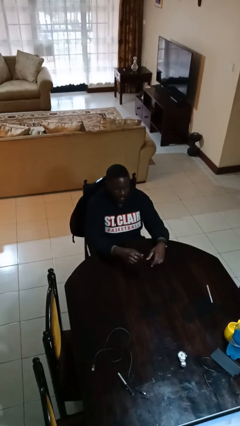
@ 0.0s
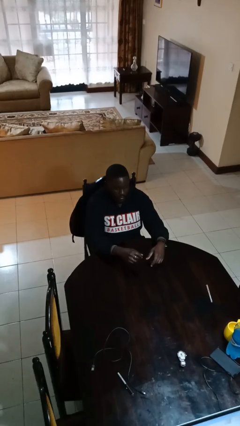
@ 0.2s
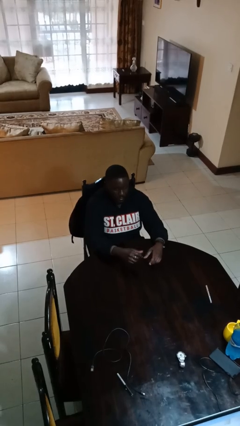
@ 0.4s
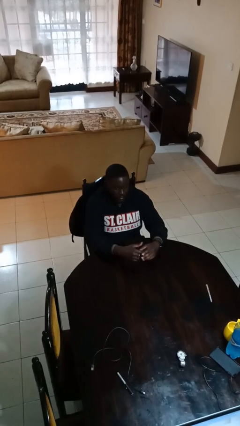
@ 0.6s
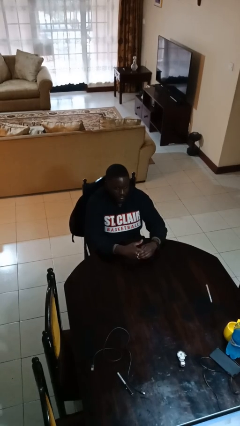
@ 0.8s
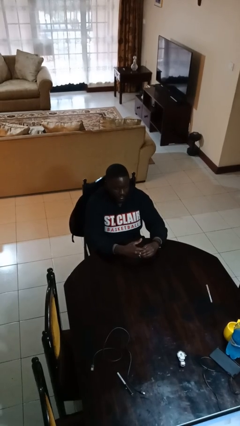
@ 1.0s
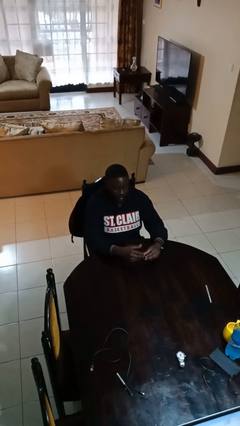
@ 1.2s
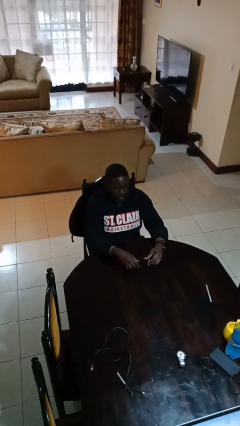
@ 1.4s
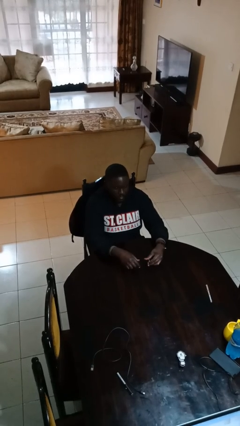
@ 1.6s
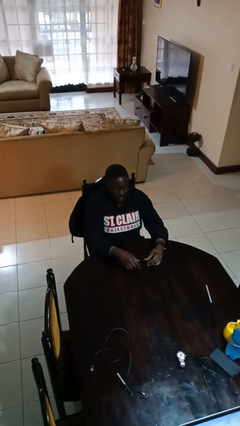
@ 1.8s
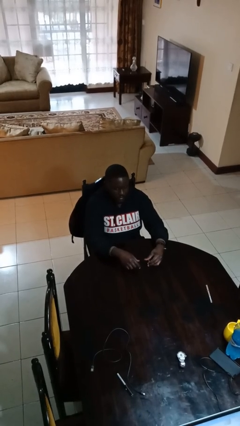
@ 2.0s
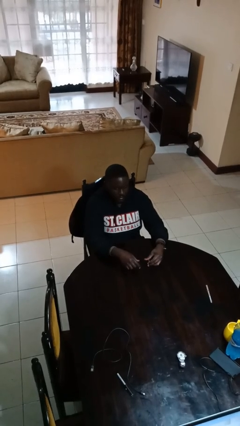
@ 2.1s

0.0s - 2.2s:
person takes off ring

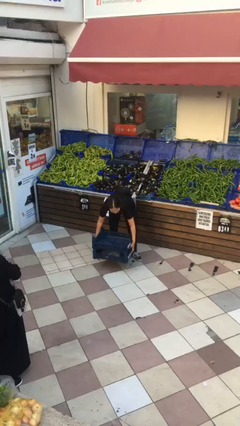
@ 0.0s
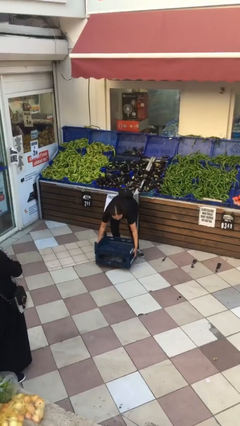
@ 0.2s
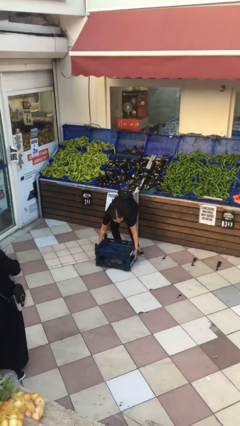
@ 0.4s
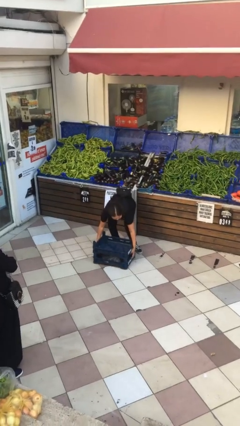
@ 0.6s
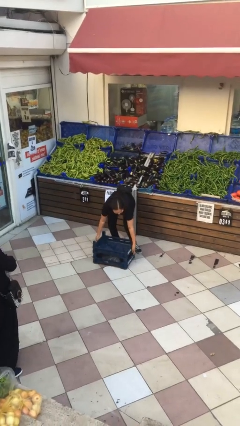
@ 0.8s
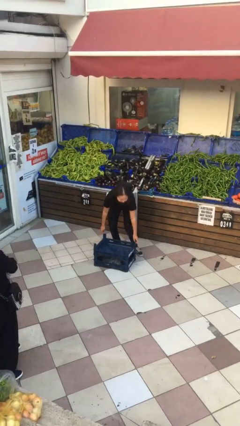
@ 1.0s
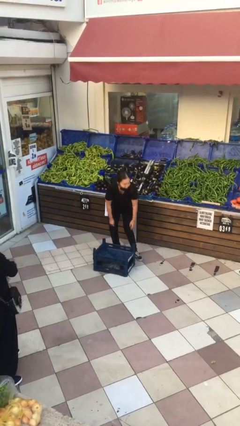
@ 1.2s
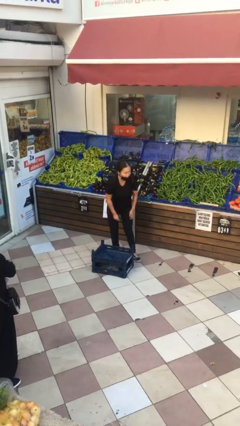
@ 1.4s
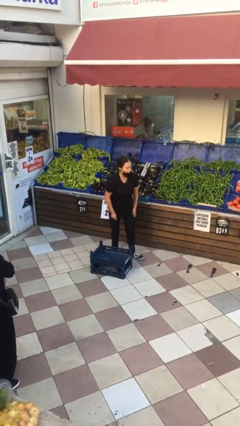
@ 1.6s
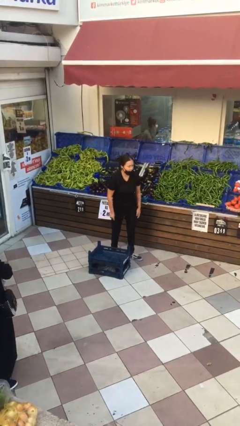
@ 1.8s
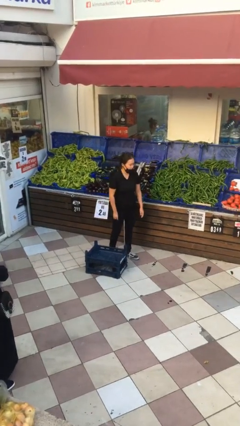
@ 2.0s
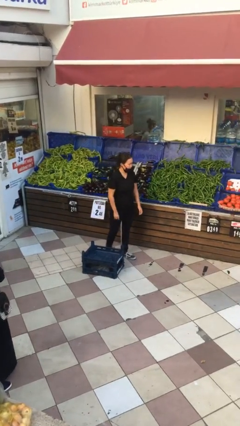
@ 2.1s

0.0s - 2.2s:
person puts down object on floor

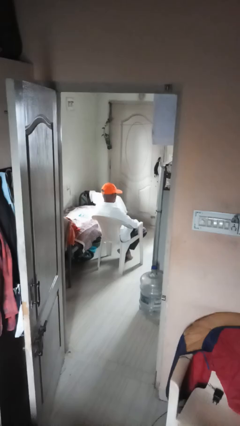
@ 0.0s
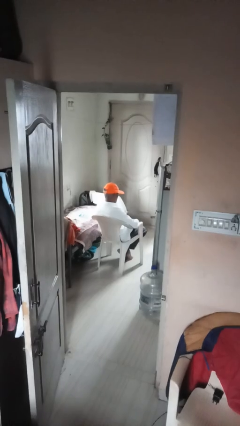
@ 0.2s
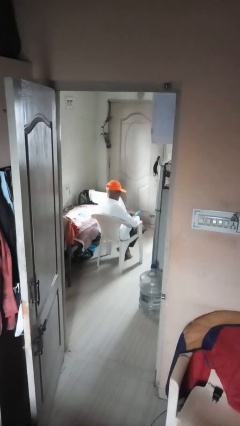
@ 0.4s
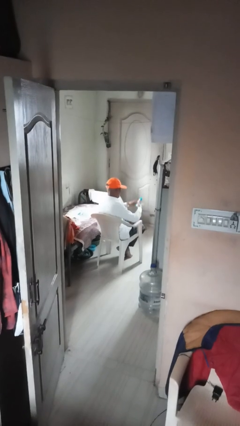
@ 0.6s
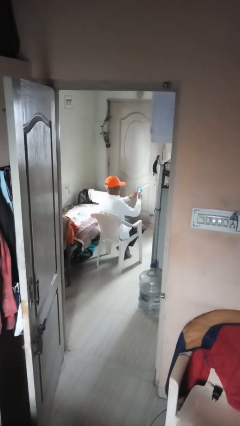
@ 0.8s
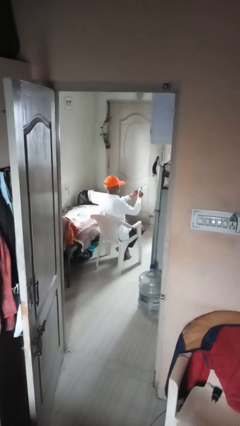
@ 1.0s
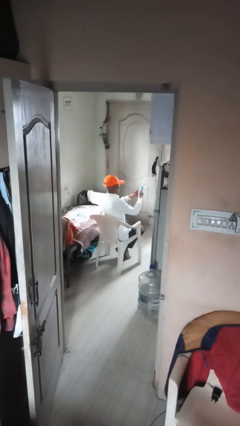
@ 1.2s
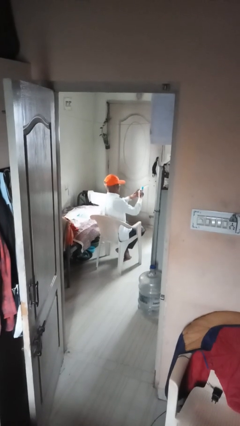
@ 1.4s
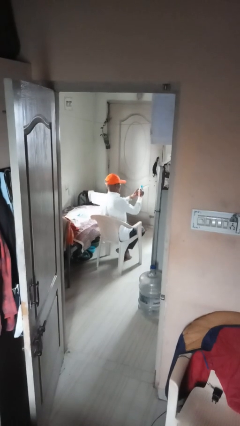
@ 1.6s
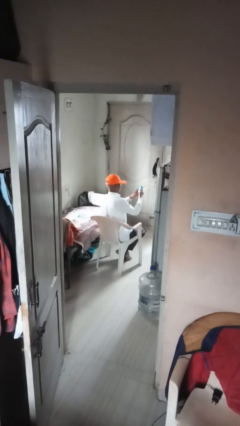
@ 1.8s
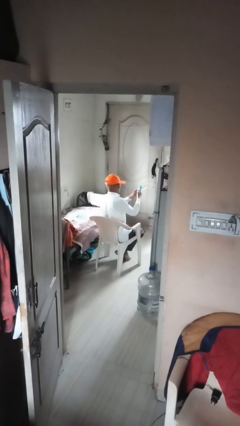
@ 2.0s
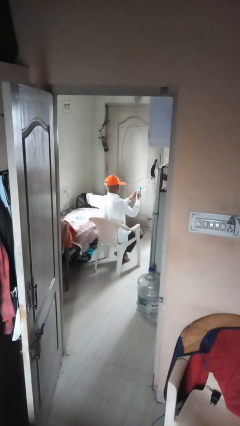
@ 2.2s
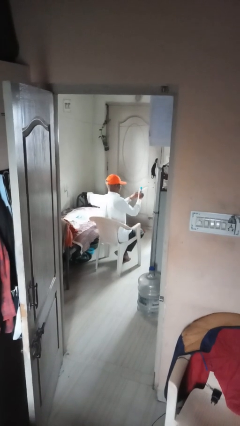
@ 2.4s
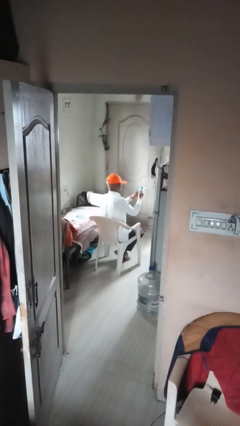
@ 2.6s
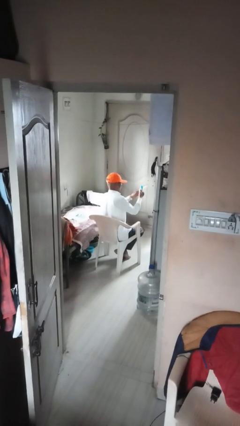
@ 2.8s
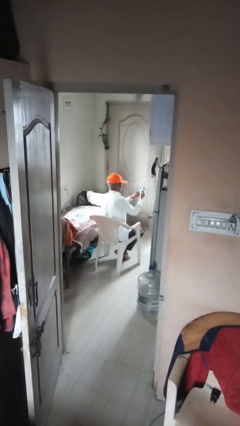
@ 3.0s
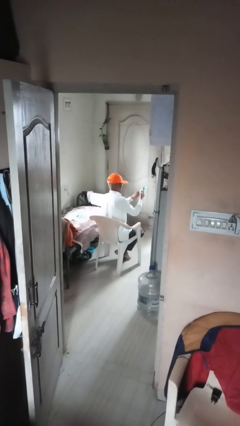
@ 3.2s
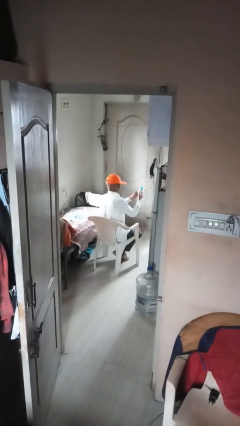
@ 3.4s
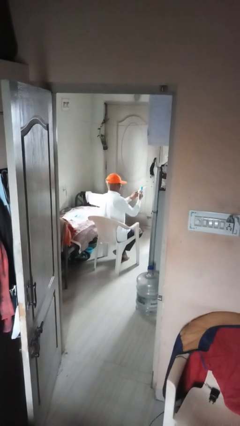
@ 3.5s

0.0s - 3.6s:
person squeezes object

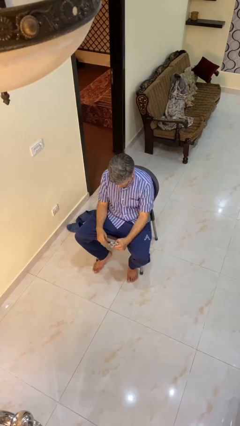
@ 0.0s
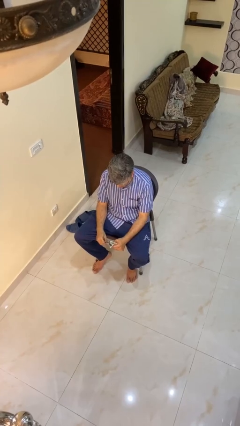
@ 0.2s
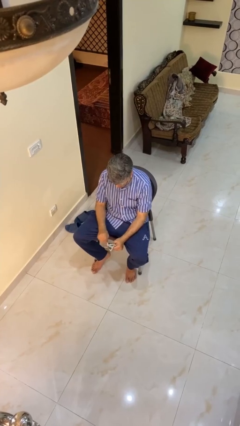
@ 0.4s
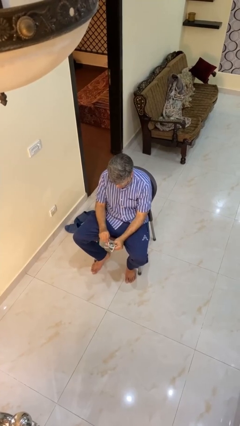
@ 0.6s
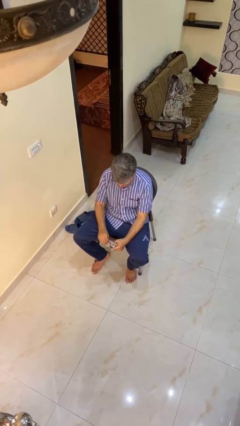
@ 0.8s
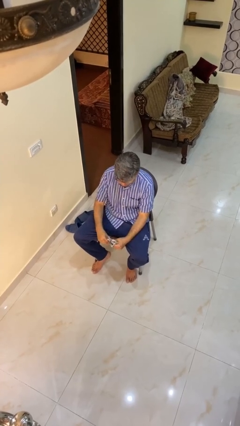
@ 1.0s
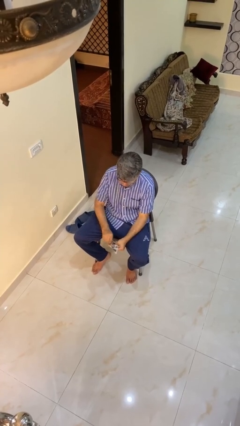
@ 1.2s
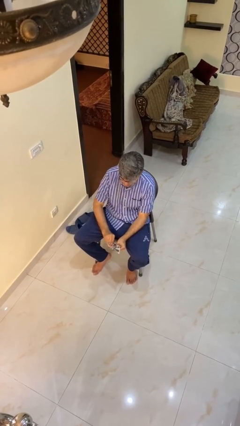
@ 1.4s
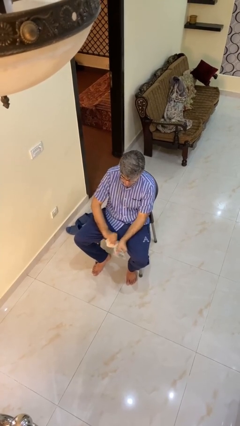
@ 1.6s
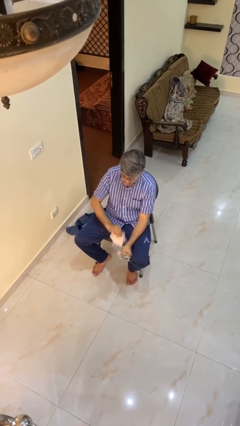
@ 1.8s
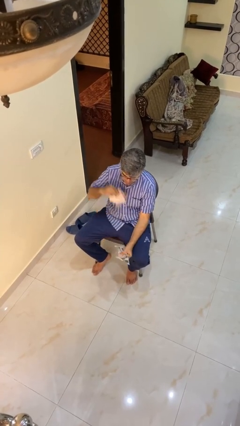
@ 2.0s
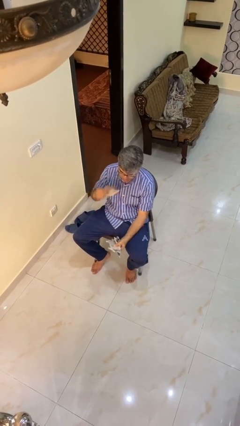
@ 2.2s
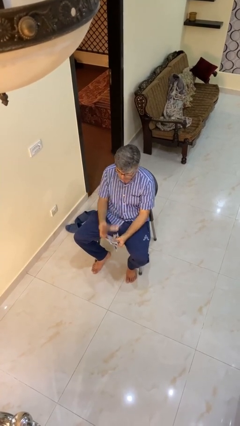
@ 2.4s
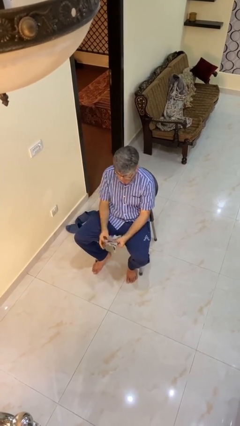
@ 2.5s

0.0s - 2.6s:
person tears paper

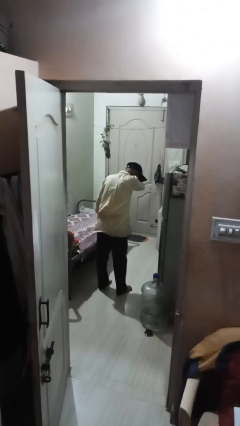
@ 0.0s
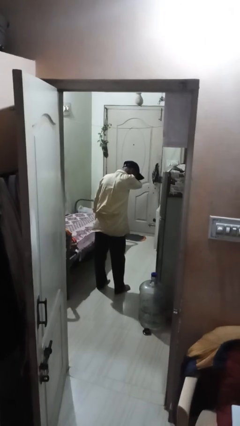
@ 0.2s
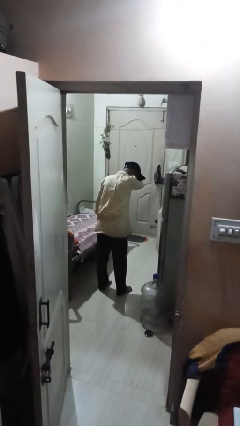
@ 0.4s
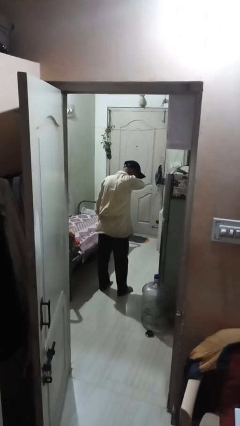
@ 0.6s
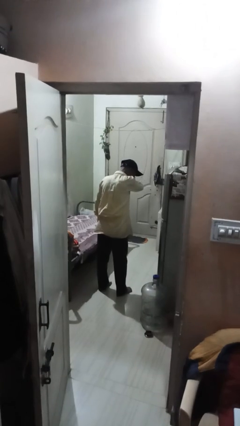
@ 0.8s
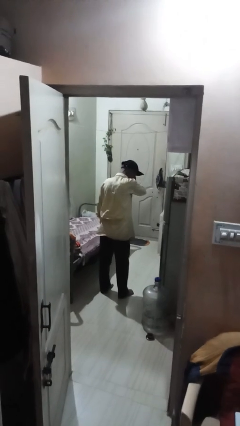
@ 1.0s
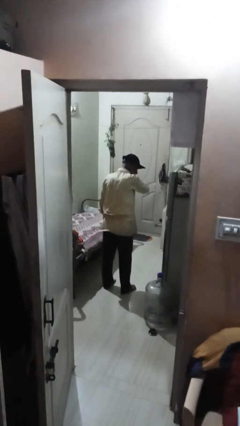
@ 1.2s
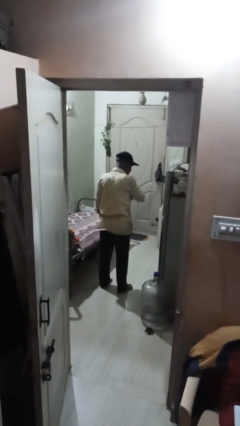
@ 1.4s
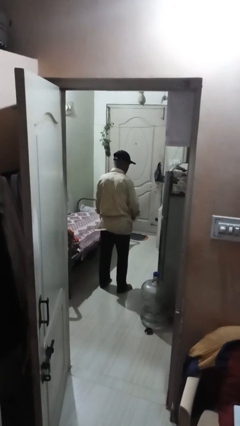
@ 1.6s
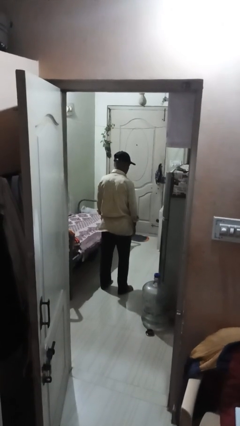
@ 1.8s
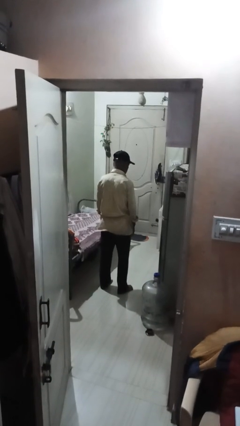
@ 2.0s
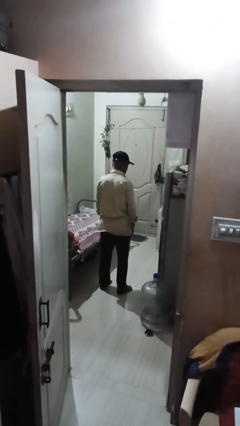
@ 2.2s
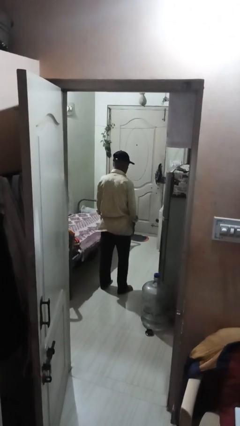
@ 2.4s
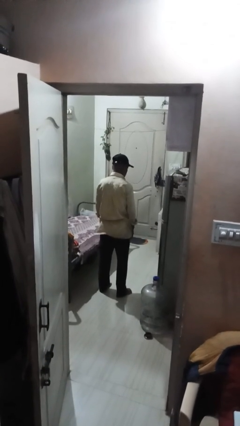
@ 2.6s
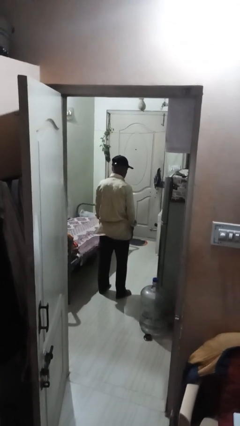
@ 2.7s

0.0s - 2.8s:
person shrugs

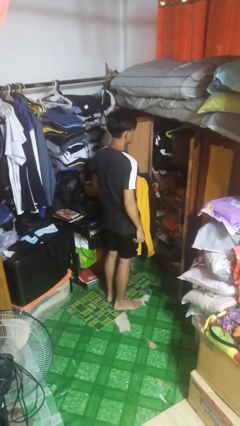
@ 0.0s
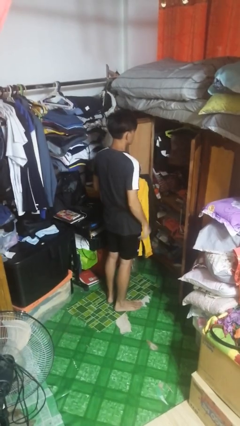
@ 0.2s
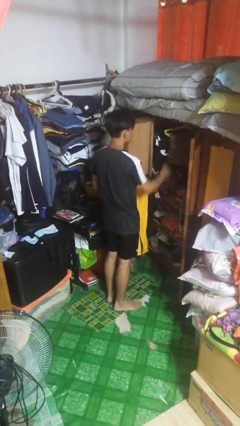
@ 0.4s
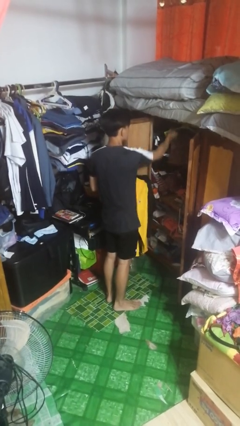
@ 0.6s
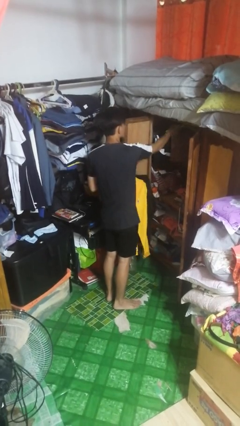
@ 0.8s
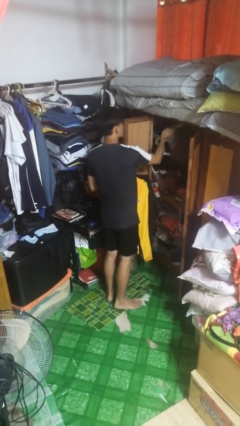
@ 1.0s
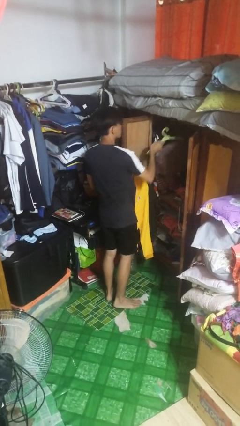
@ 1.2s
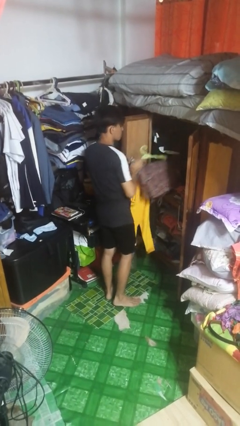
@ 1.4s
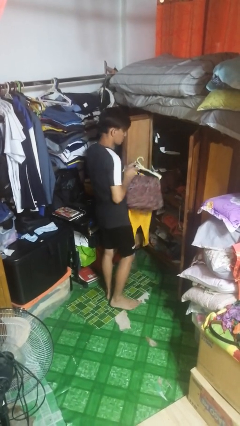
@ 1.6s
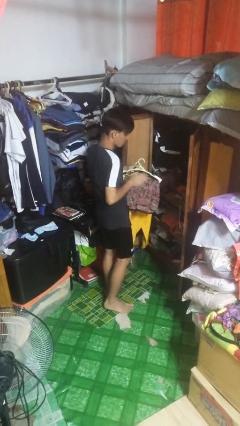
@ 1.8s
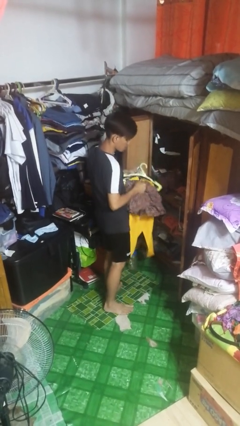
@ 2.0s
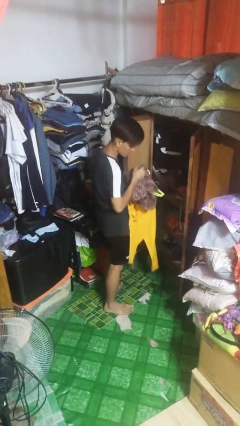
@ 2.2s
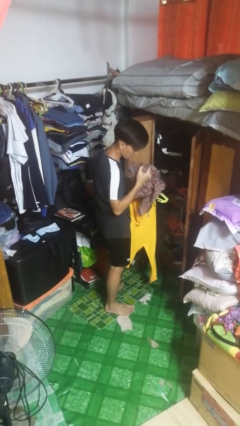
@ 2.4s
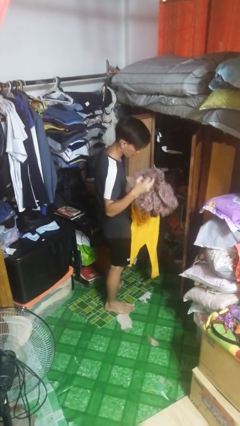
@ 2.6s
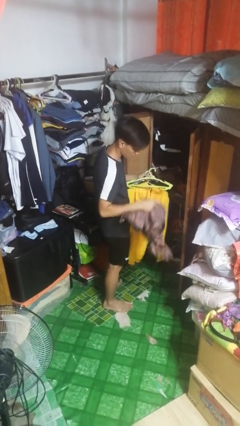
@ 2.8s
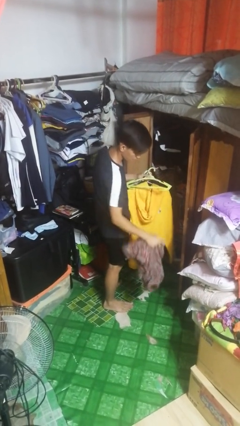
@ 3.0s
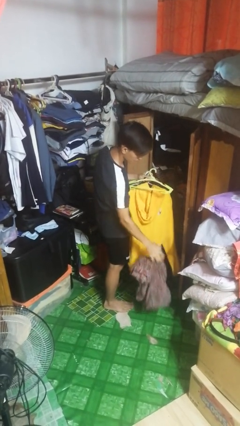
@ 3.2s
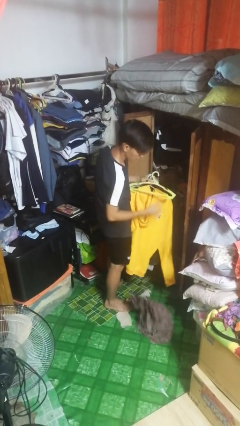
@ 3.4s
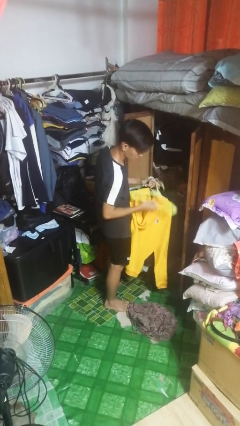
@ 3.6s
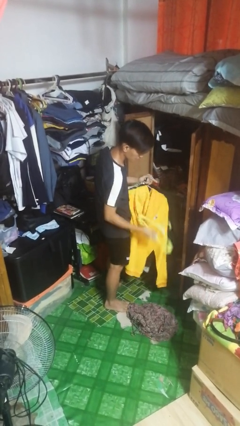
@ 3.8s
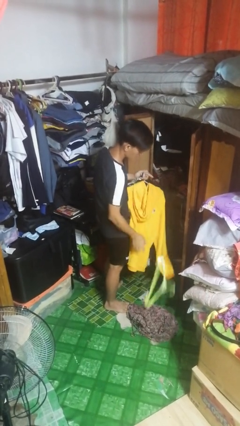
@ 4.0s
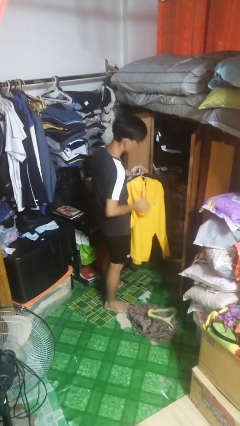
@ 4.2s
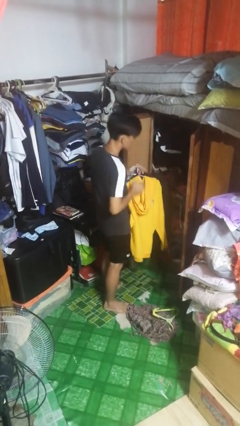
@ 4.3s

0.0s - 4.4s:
person takes clothes from closet
